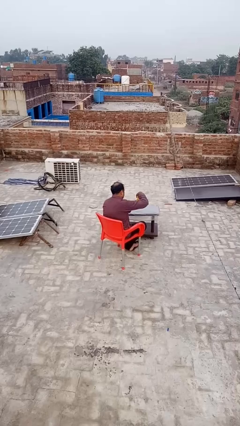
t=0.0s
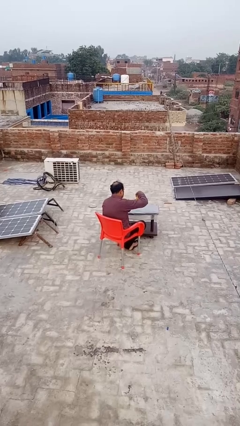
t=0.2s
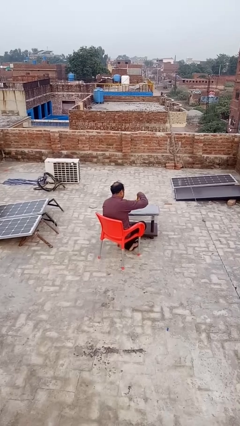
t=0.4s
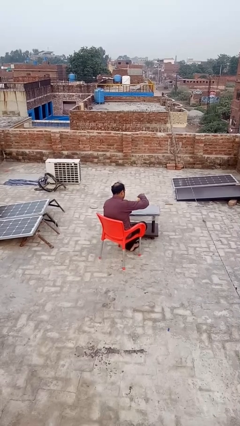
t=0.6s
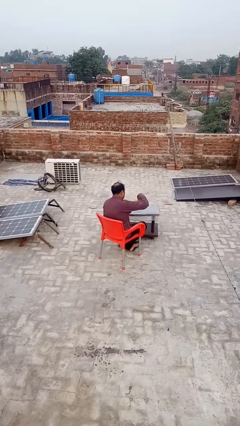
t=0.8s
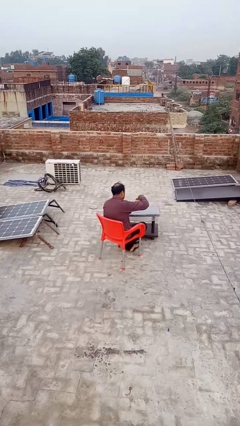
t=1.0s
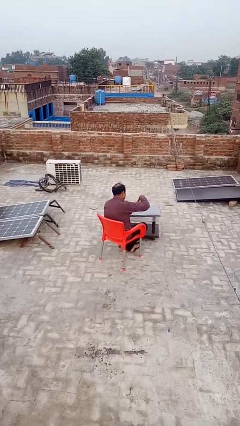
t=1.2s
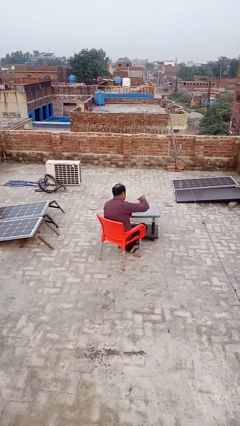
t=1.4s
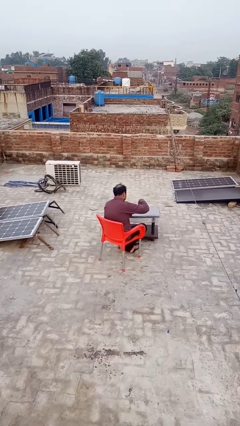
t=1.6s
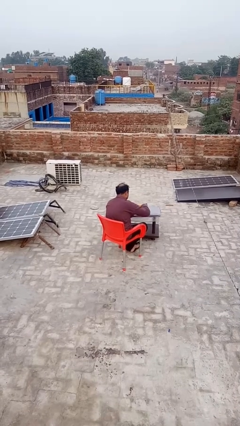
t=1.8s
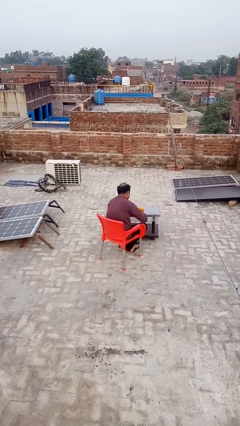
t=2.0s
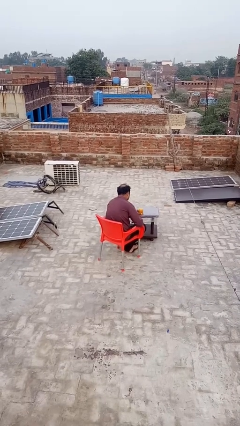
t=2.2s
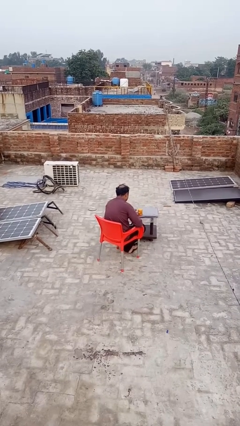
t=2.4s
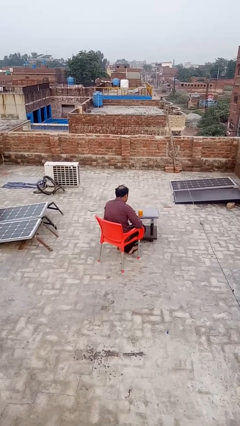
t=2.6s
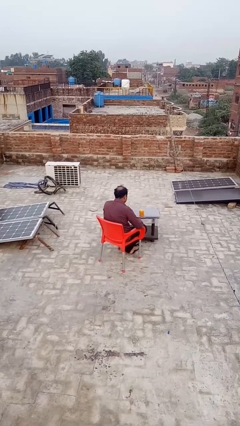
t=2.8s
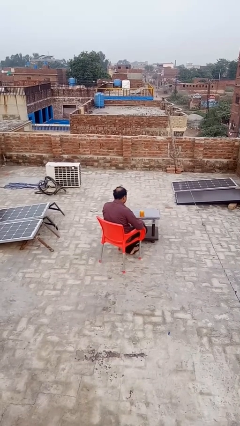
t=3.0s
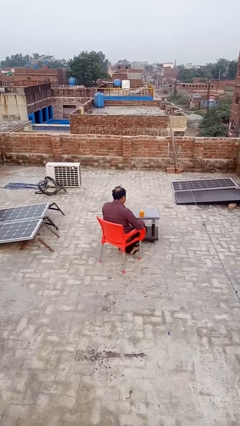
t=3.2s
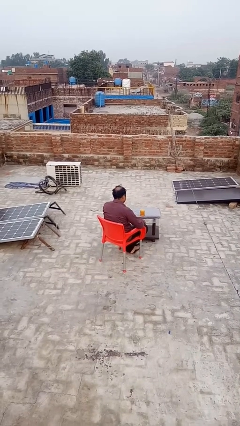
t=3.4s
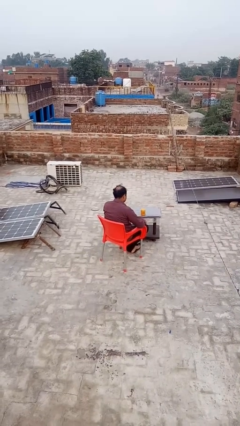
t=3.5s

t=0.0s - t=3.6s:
person closes jar

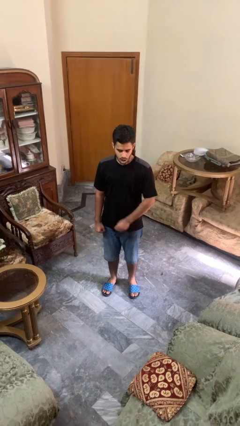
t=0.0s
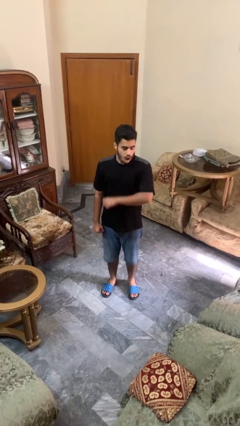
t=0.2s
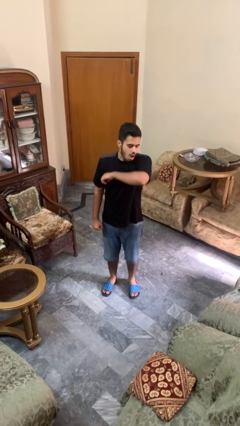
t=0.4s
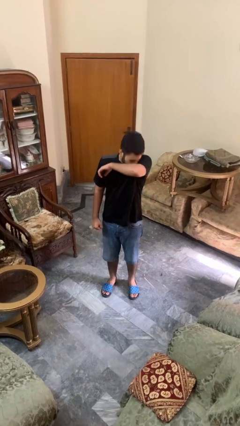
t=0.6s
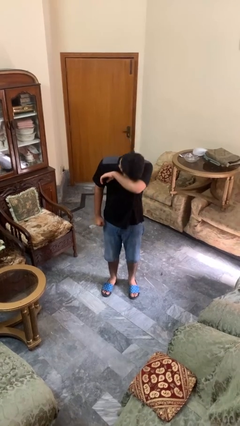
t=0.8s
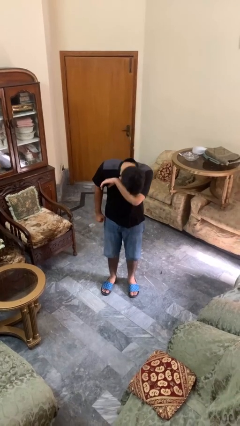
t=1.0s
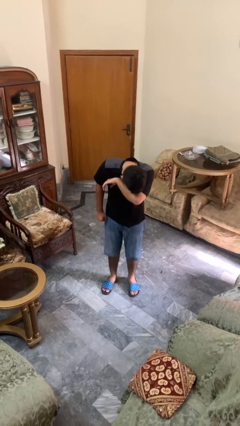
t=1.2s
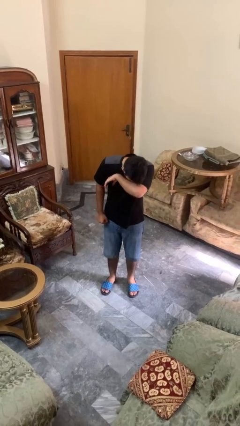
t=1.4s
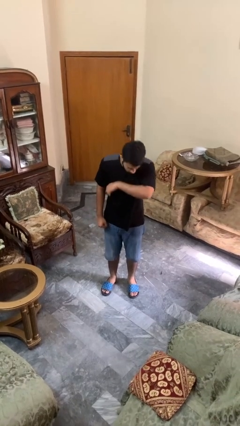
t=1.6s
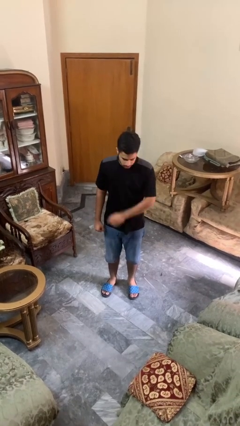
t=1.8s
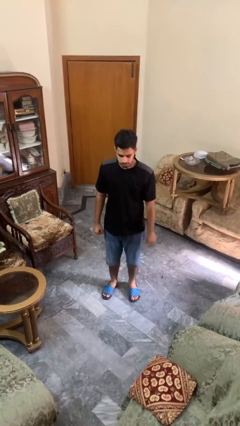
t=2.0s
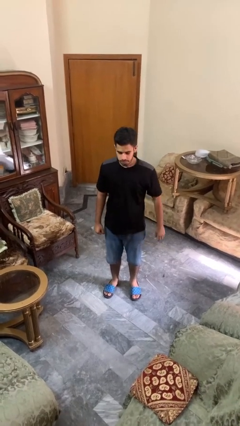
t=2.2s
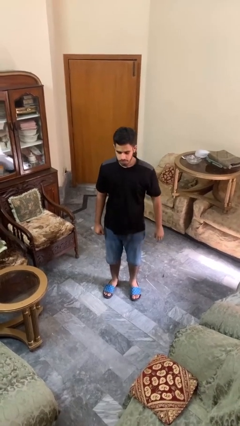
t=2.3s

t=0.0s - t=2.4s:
person sneezes into arm

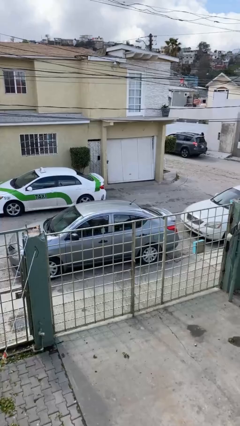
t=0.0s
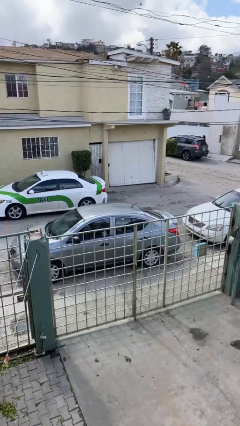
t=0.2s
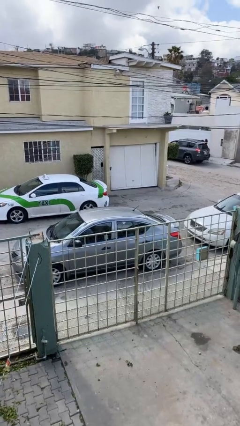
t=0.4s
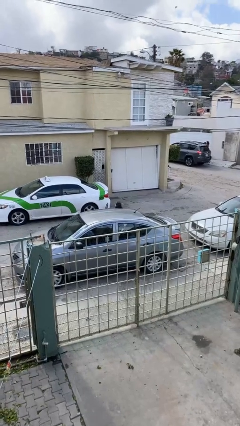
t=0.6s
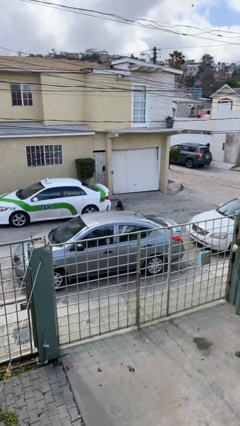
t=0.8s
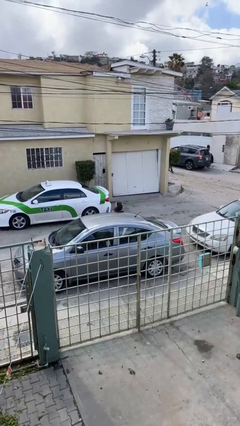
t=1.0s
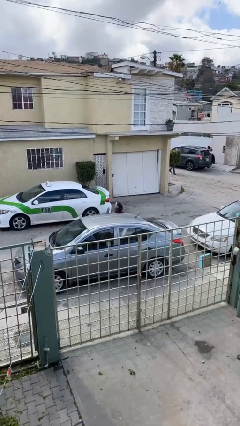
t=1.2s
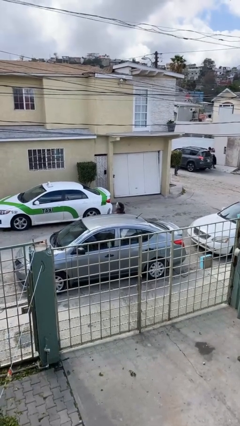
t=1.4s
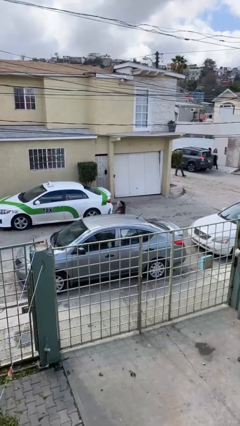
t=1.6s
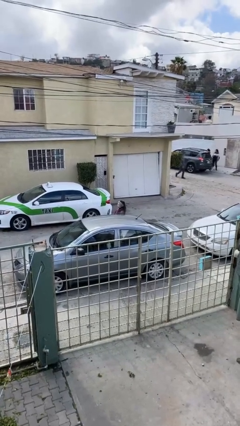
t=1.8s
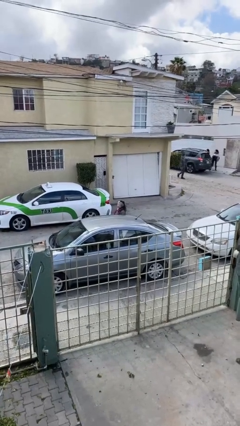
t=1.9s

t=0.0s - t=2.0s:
person exits car

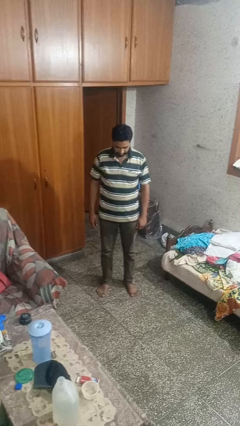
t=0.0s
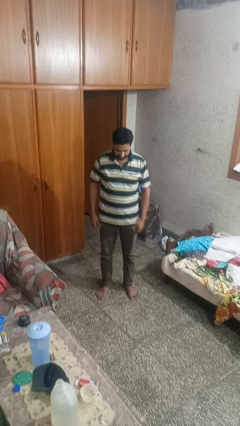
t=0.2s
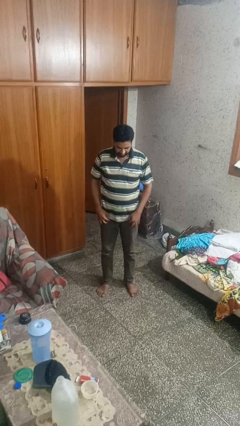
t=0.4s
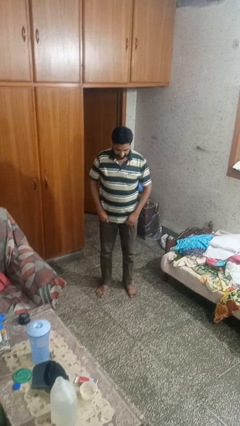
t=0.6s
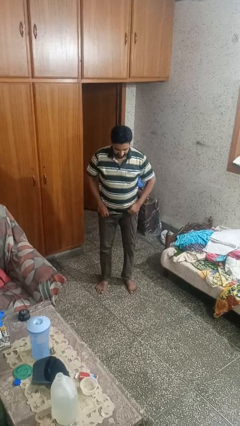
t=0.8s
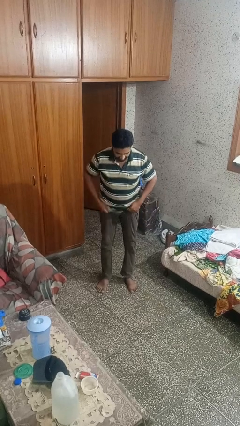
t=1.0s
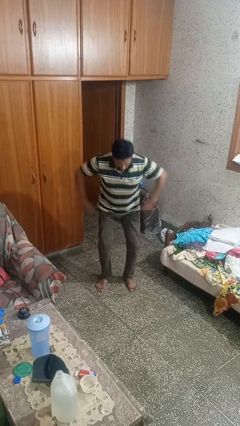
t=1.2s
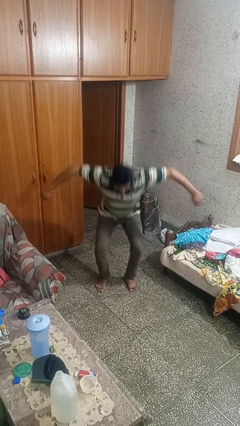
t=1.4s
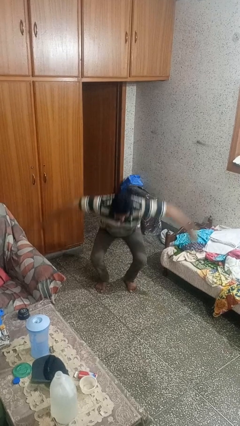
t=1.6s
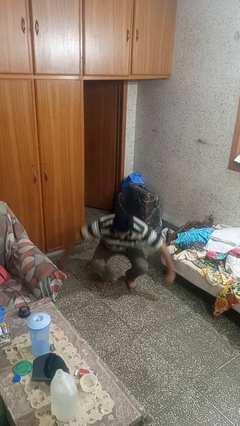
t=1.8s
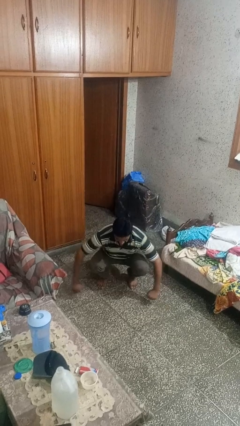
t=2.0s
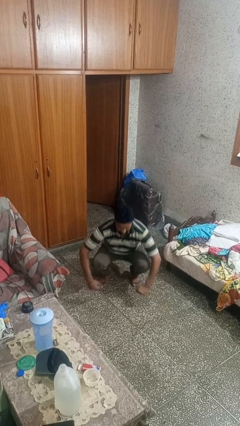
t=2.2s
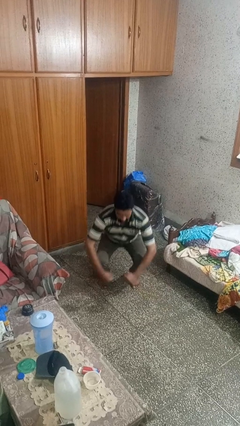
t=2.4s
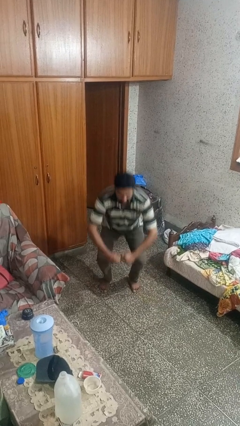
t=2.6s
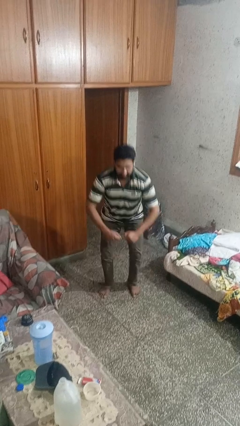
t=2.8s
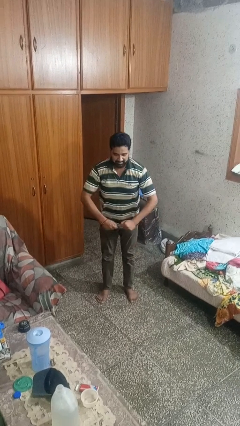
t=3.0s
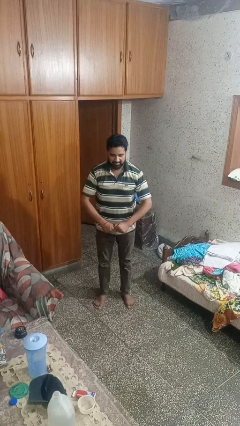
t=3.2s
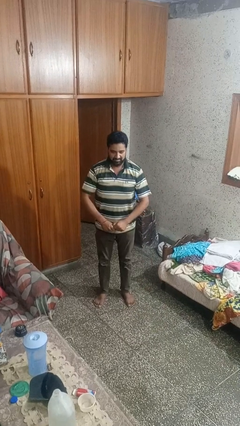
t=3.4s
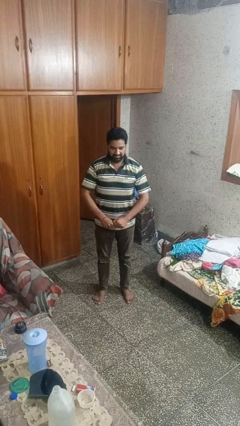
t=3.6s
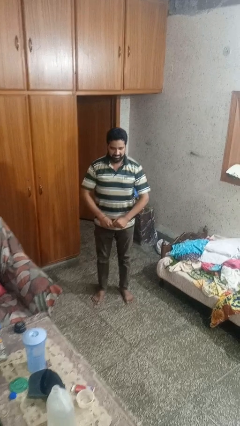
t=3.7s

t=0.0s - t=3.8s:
person exercises with situp

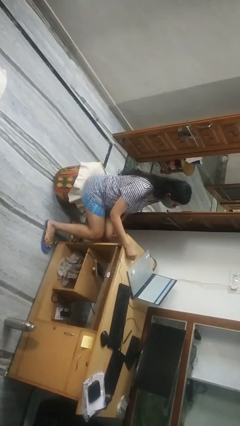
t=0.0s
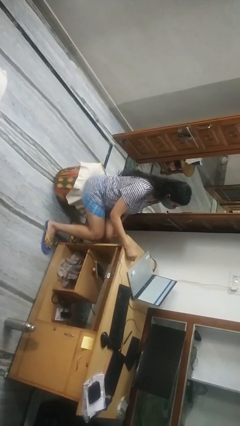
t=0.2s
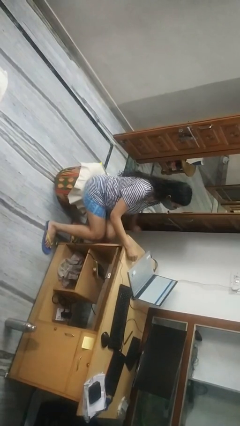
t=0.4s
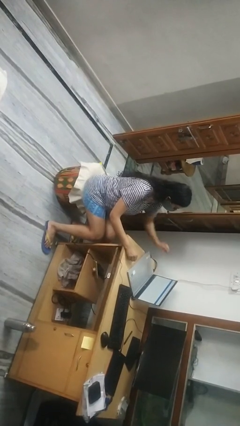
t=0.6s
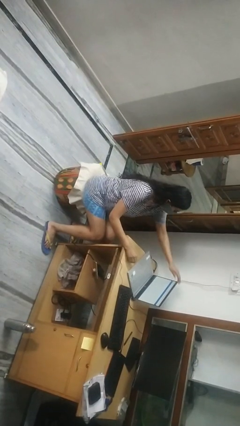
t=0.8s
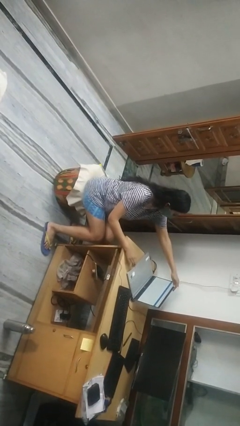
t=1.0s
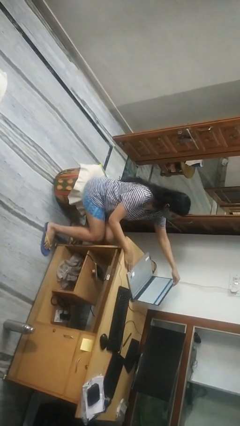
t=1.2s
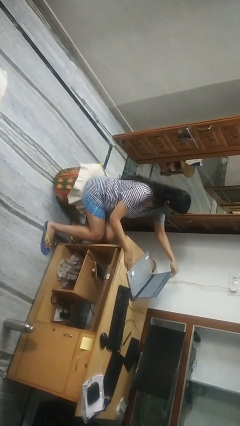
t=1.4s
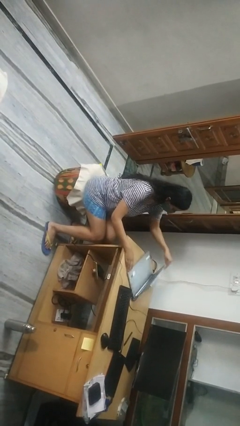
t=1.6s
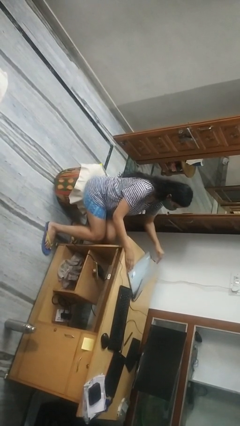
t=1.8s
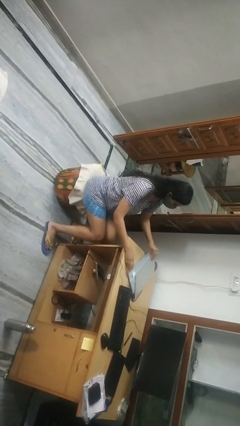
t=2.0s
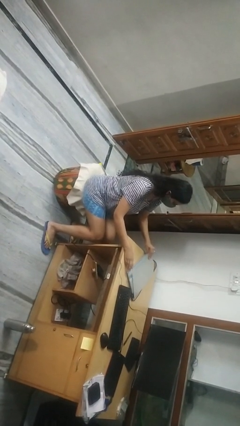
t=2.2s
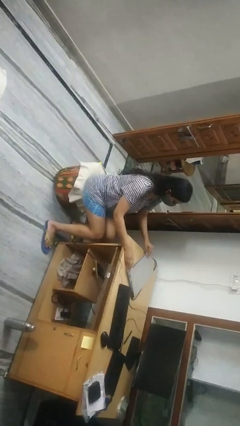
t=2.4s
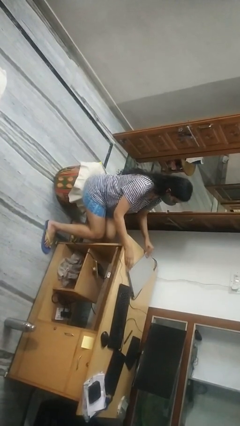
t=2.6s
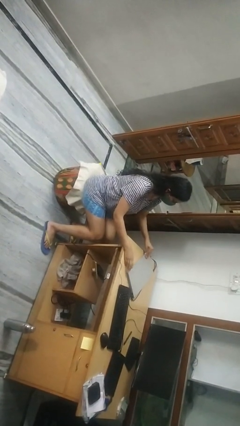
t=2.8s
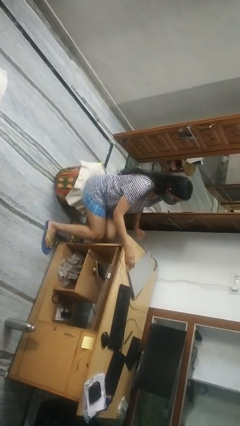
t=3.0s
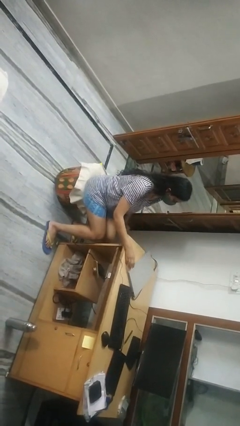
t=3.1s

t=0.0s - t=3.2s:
person closes laptop

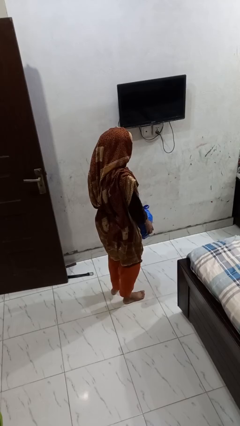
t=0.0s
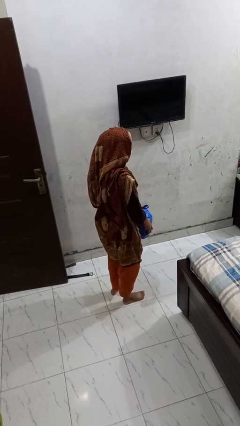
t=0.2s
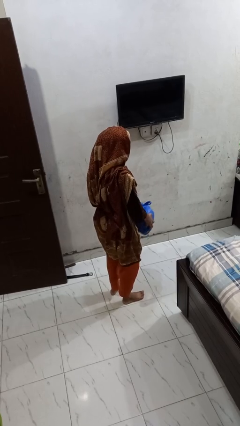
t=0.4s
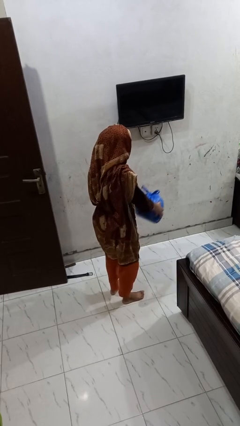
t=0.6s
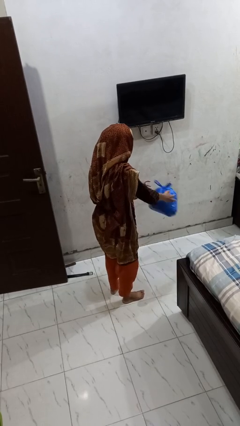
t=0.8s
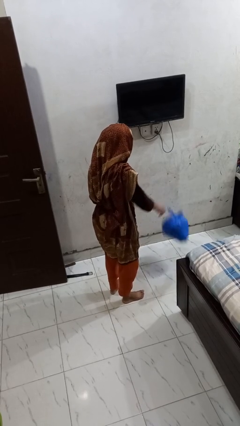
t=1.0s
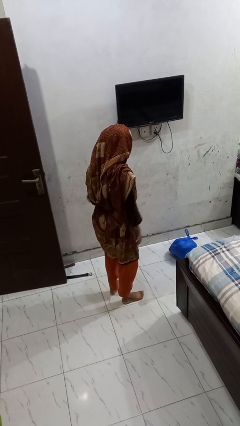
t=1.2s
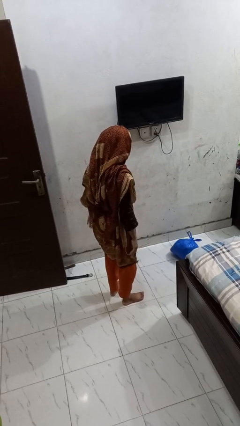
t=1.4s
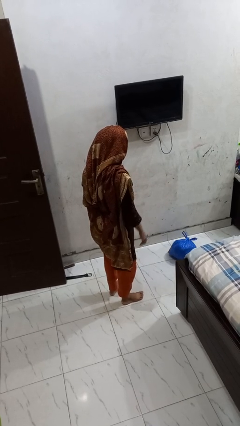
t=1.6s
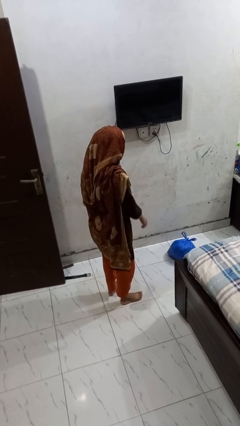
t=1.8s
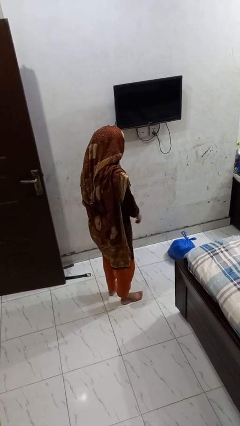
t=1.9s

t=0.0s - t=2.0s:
person throws object to ground

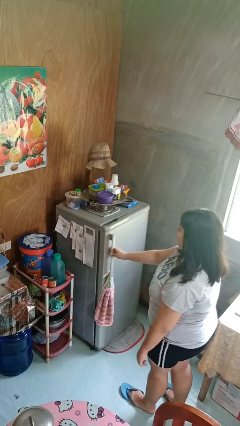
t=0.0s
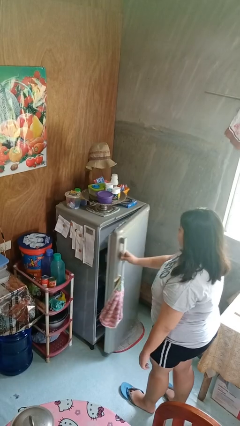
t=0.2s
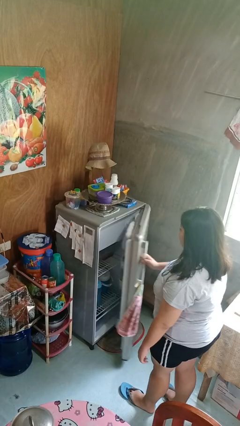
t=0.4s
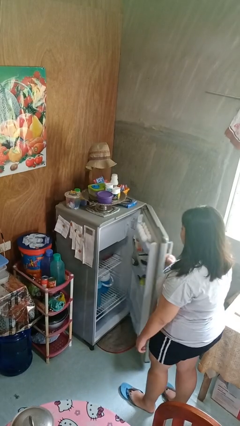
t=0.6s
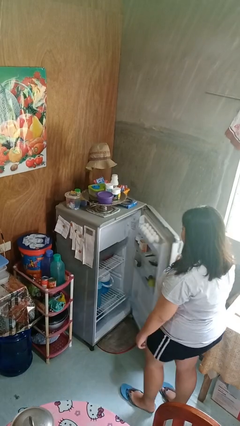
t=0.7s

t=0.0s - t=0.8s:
person opens refrigerator
